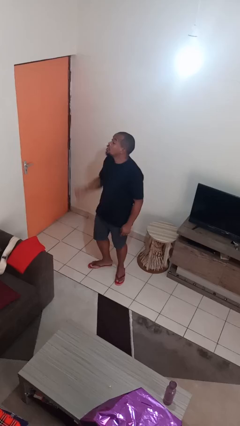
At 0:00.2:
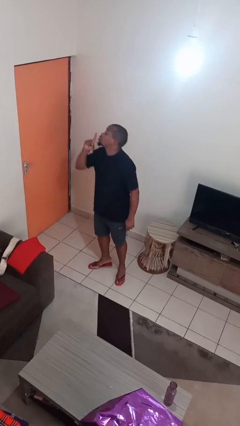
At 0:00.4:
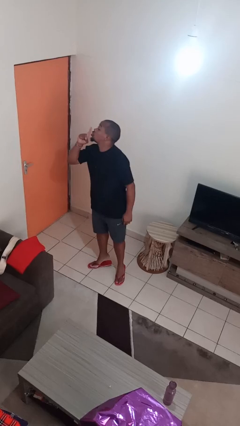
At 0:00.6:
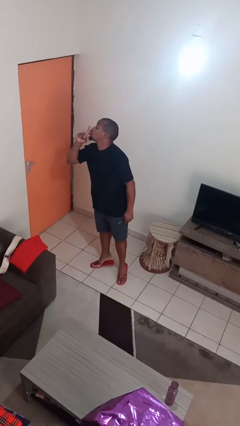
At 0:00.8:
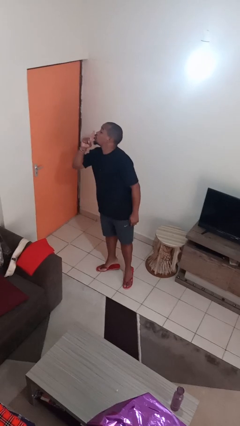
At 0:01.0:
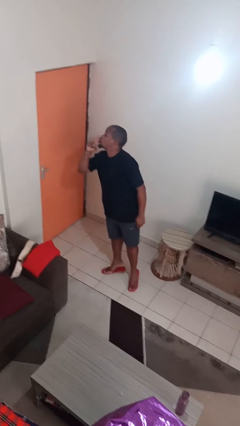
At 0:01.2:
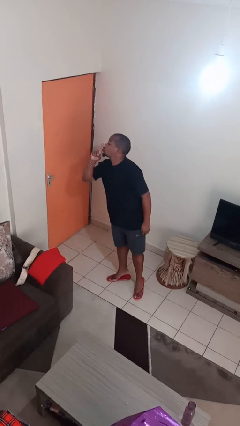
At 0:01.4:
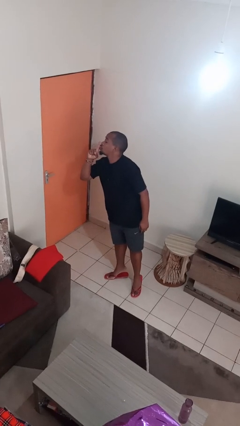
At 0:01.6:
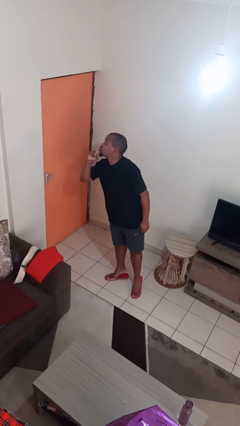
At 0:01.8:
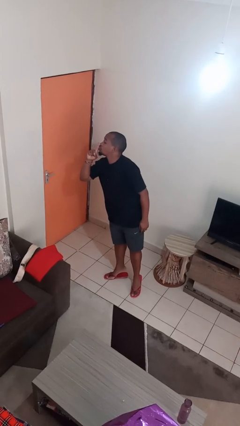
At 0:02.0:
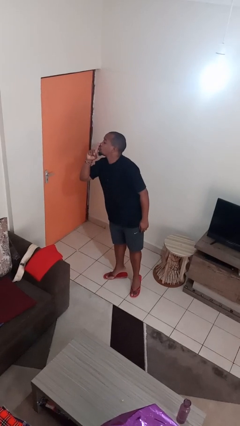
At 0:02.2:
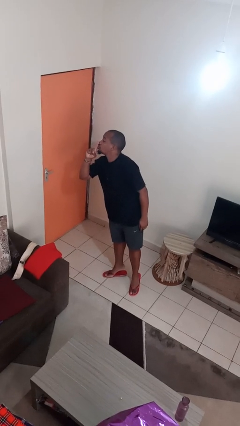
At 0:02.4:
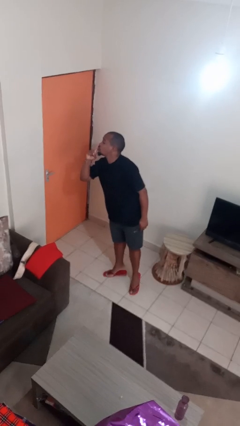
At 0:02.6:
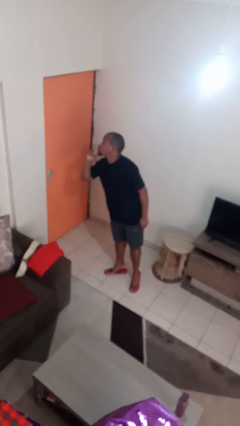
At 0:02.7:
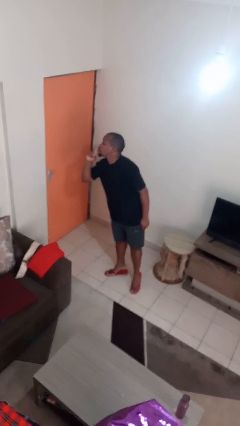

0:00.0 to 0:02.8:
person gestures be quiet

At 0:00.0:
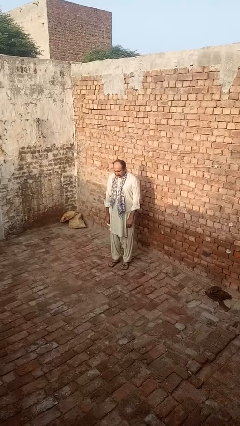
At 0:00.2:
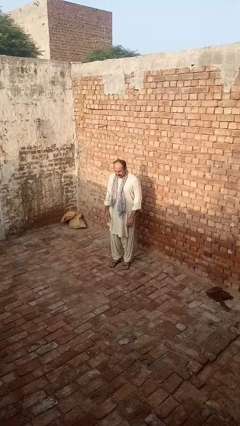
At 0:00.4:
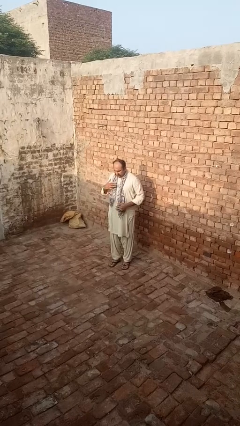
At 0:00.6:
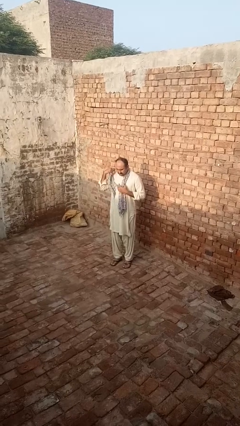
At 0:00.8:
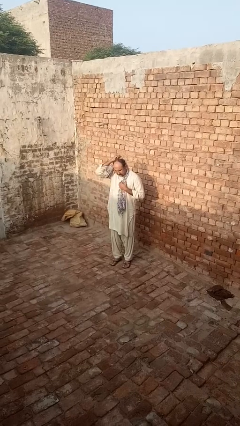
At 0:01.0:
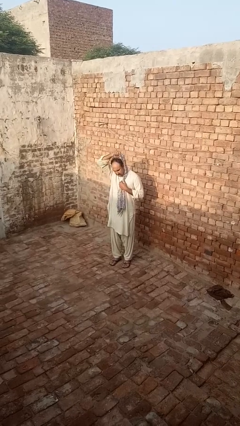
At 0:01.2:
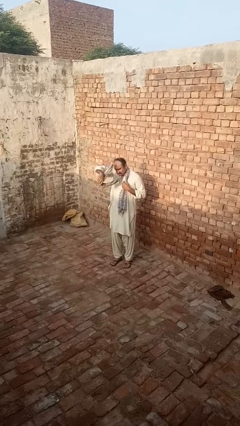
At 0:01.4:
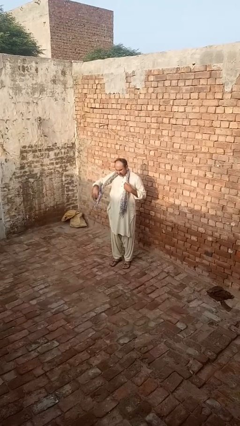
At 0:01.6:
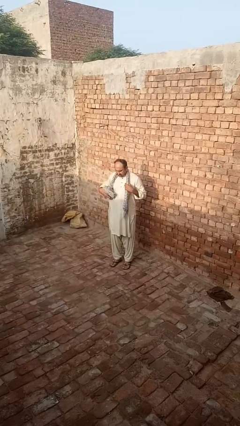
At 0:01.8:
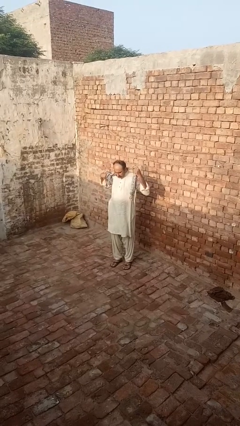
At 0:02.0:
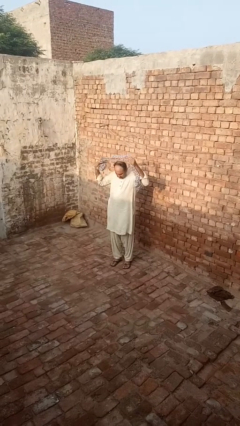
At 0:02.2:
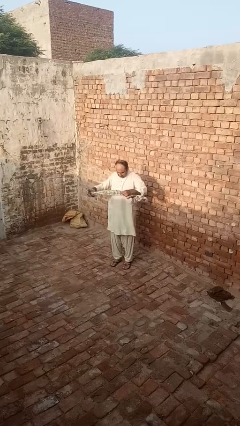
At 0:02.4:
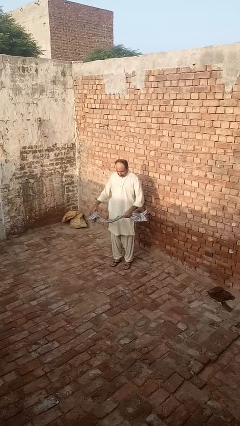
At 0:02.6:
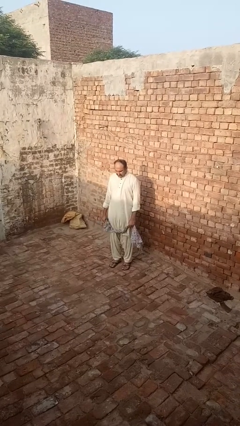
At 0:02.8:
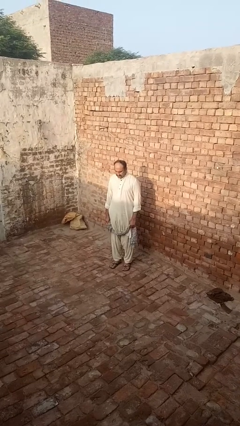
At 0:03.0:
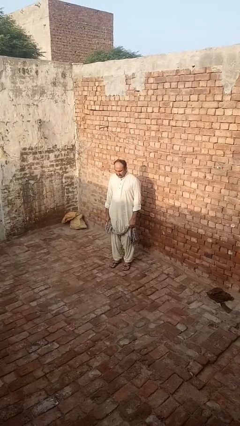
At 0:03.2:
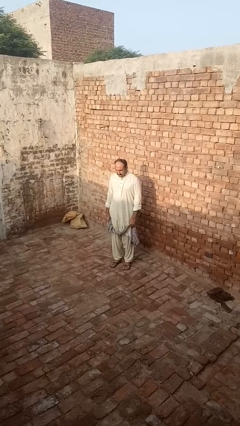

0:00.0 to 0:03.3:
person takes off scarf

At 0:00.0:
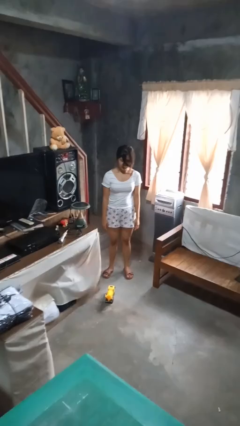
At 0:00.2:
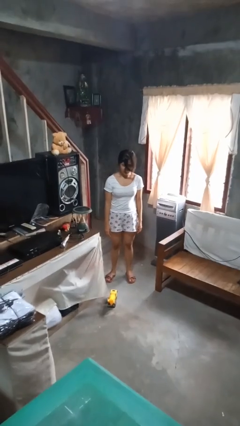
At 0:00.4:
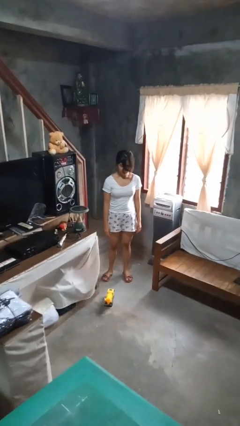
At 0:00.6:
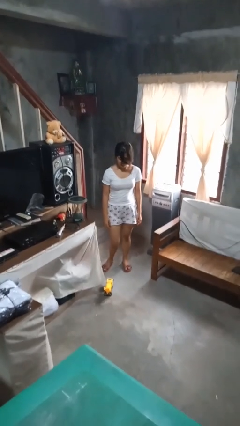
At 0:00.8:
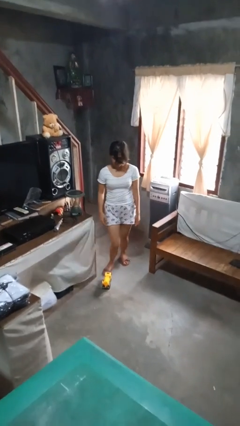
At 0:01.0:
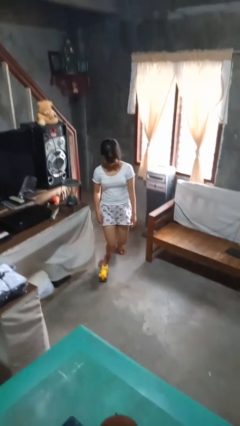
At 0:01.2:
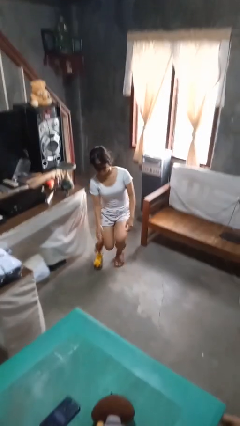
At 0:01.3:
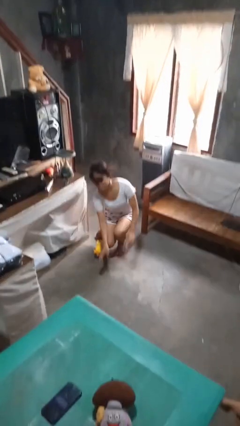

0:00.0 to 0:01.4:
person trips on object on floor

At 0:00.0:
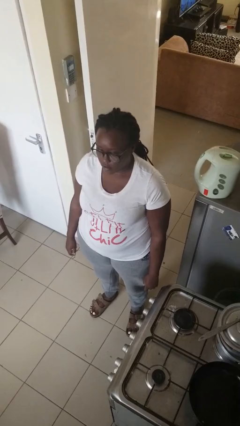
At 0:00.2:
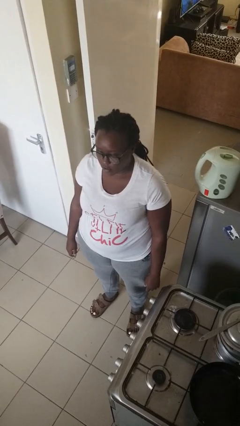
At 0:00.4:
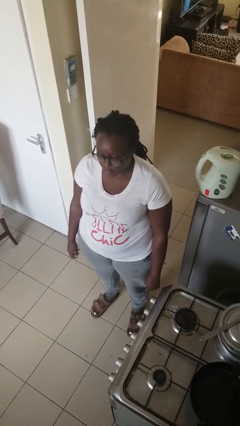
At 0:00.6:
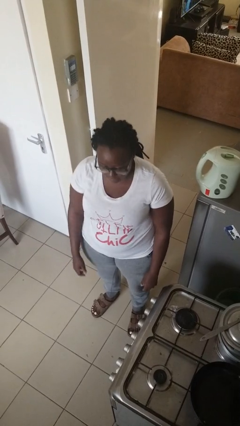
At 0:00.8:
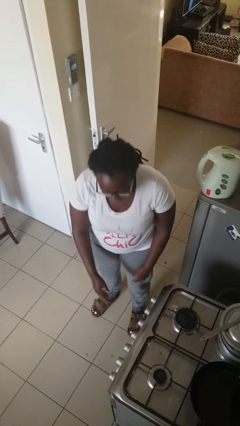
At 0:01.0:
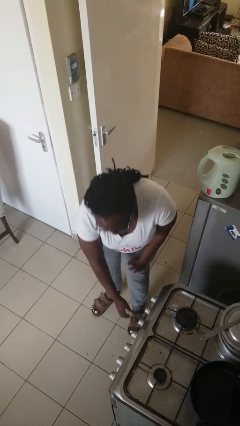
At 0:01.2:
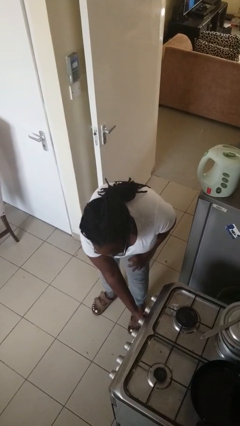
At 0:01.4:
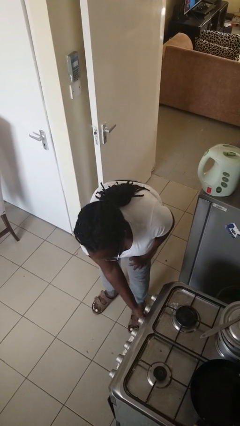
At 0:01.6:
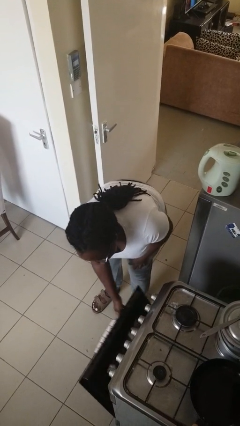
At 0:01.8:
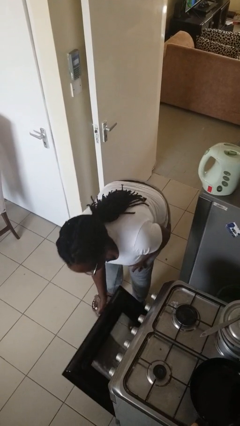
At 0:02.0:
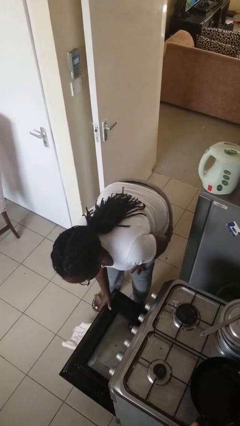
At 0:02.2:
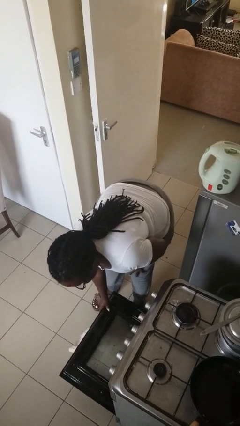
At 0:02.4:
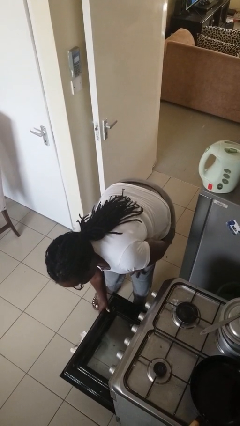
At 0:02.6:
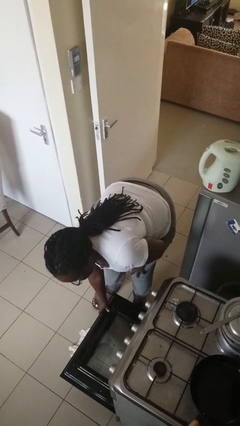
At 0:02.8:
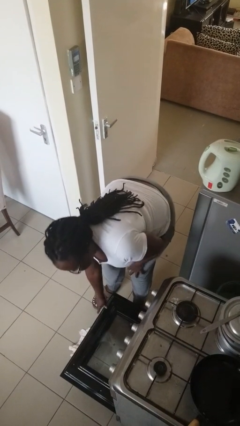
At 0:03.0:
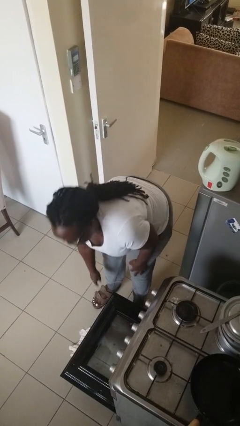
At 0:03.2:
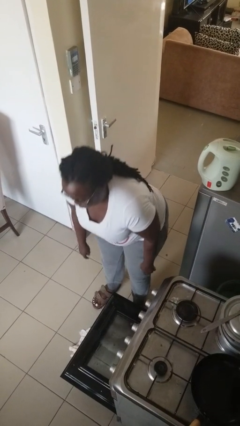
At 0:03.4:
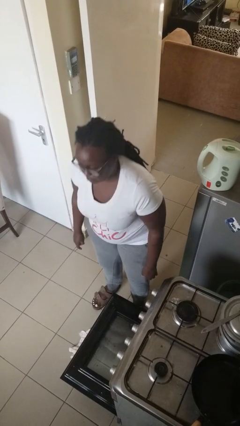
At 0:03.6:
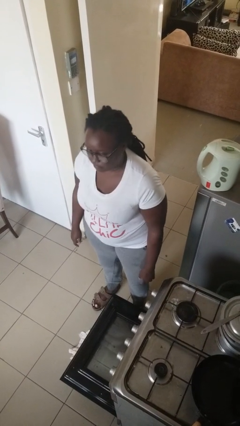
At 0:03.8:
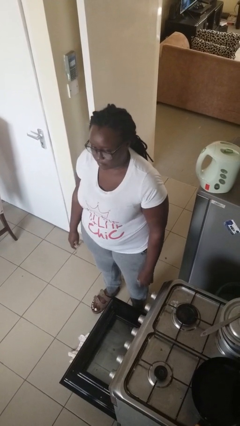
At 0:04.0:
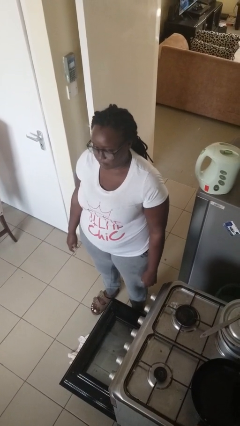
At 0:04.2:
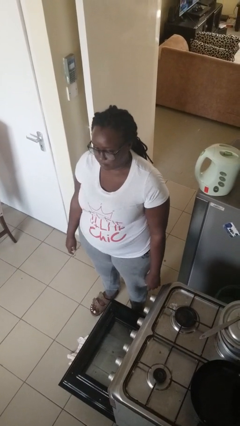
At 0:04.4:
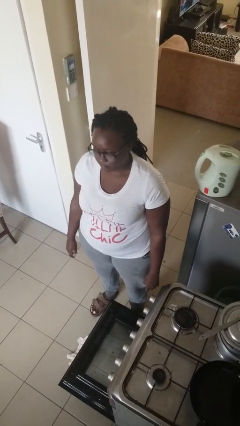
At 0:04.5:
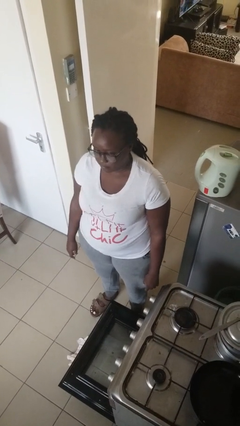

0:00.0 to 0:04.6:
person opens oven door

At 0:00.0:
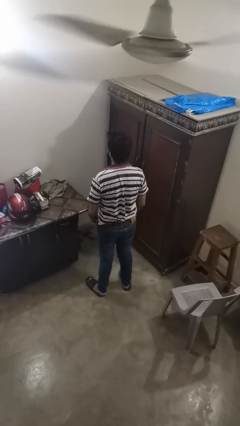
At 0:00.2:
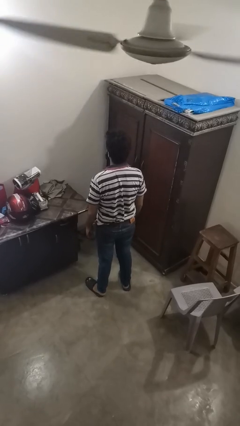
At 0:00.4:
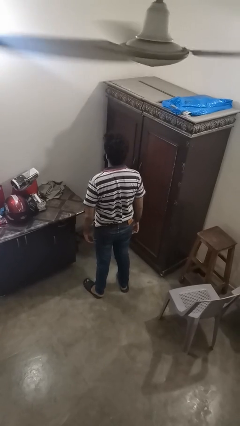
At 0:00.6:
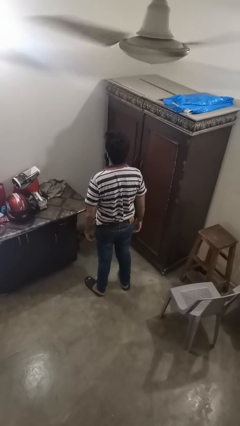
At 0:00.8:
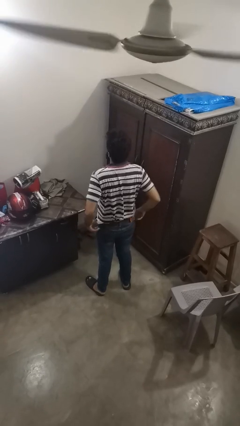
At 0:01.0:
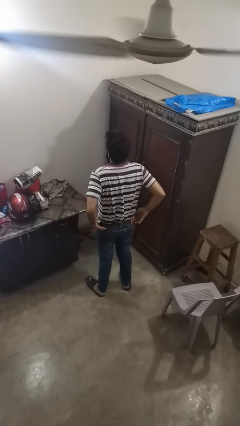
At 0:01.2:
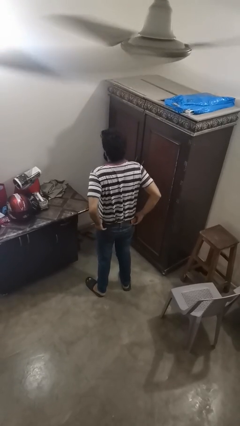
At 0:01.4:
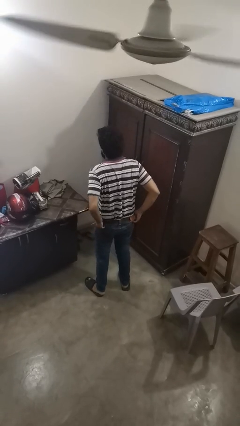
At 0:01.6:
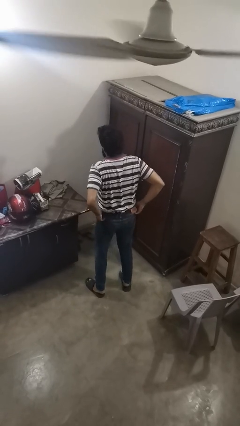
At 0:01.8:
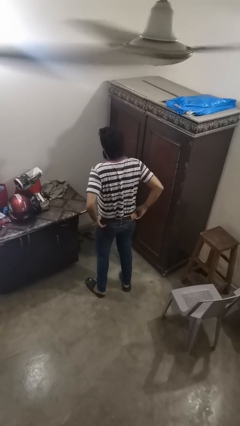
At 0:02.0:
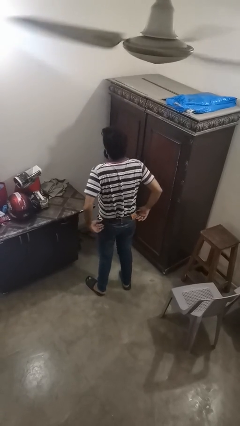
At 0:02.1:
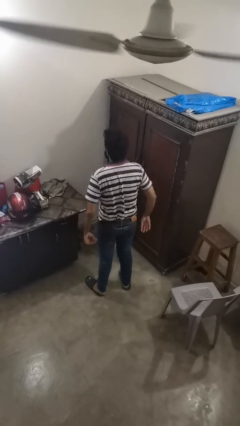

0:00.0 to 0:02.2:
person hikes up pants

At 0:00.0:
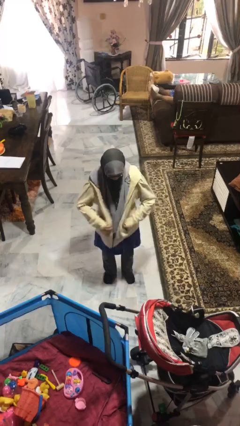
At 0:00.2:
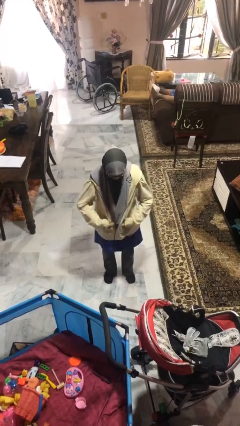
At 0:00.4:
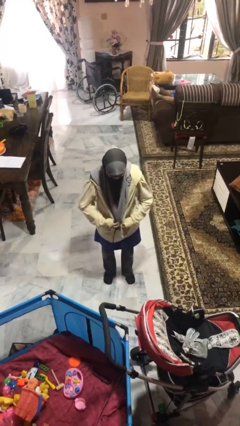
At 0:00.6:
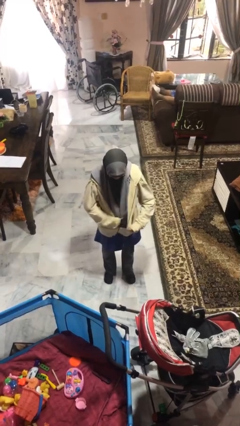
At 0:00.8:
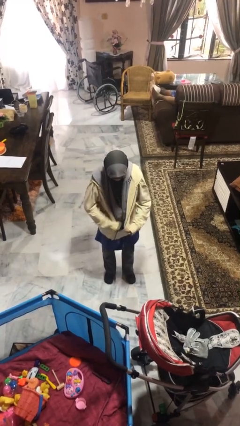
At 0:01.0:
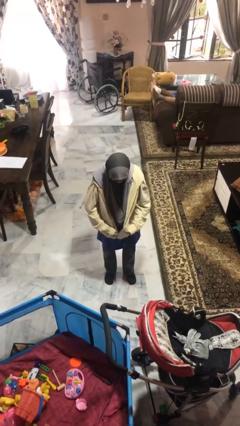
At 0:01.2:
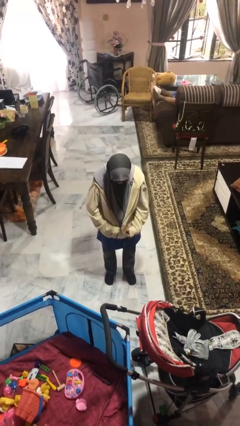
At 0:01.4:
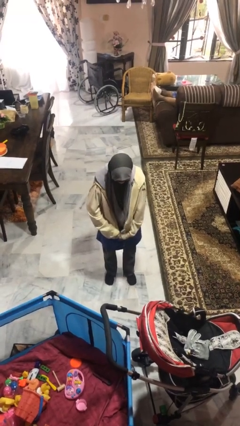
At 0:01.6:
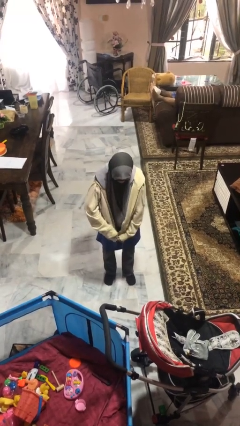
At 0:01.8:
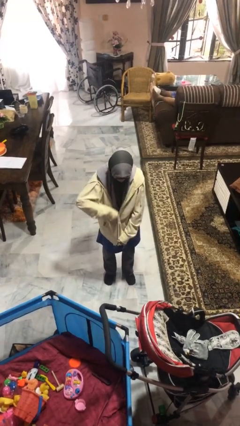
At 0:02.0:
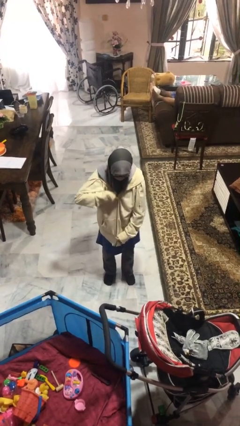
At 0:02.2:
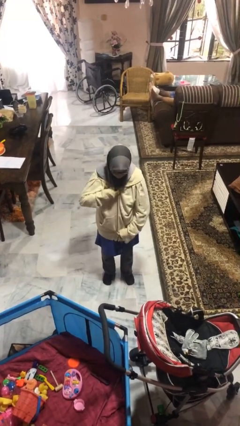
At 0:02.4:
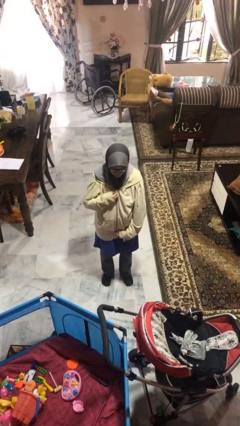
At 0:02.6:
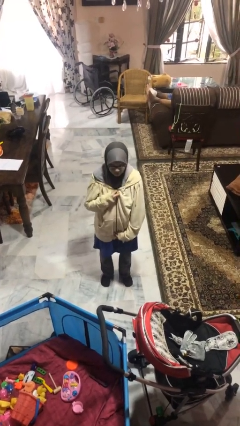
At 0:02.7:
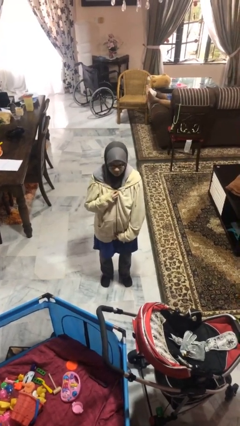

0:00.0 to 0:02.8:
person zips up jacket

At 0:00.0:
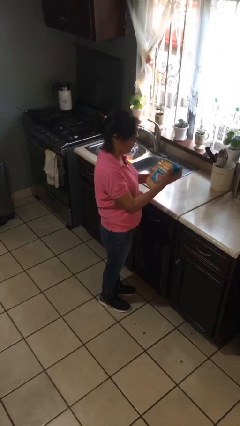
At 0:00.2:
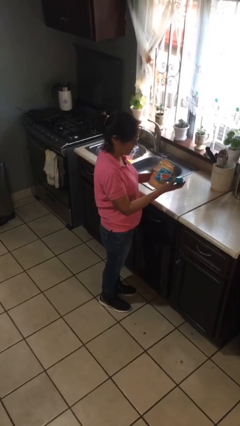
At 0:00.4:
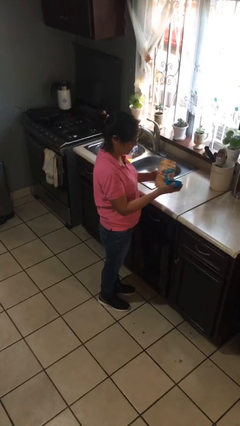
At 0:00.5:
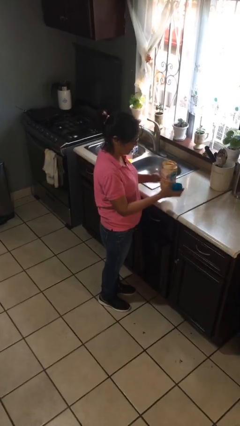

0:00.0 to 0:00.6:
person opens jar
